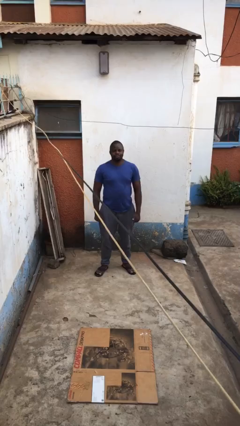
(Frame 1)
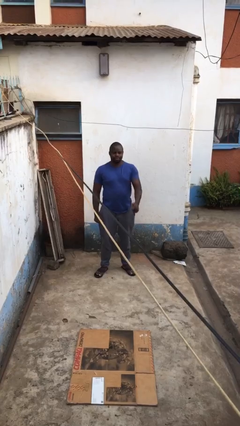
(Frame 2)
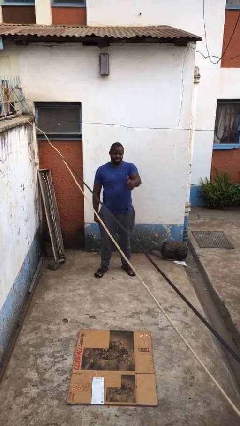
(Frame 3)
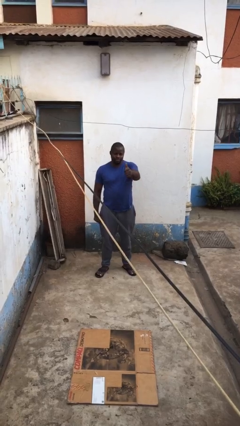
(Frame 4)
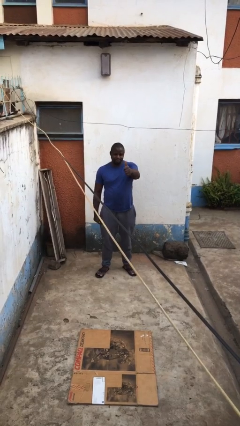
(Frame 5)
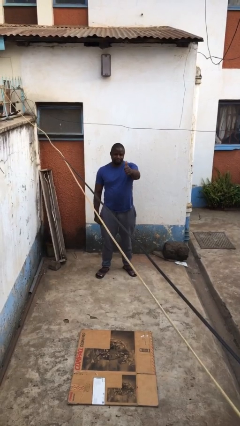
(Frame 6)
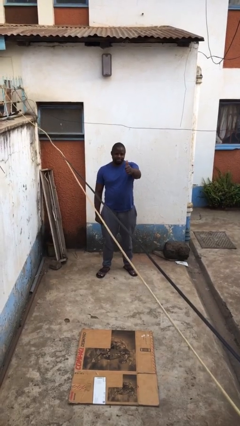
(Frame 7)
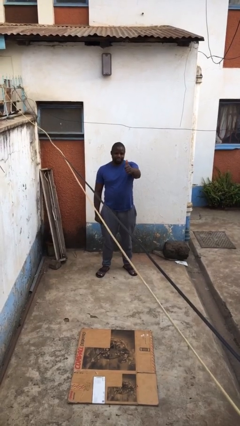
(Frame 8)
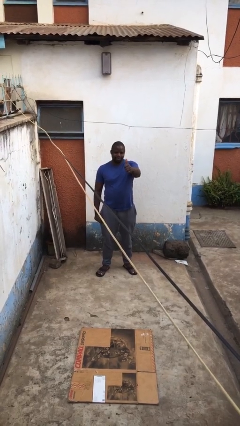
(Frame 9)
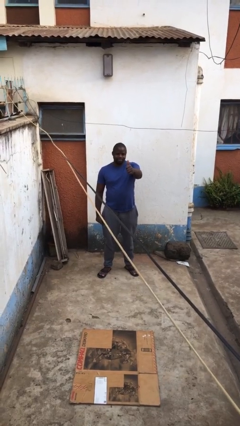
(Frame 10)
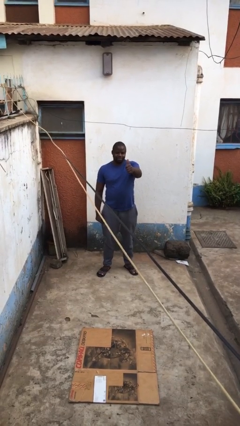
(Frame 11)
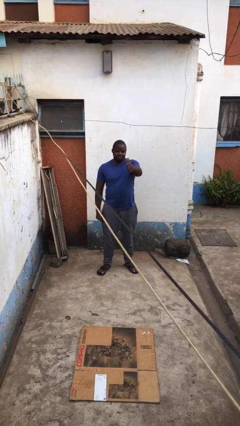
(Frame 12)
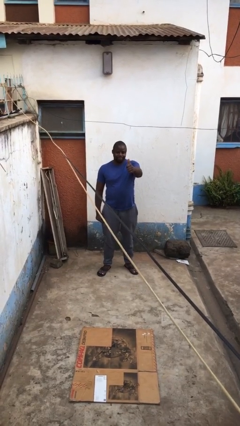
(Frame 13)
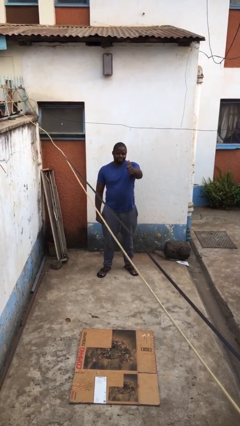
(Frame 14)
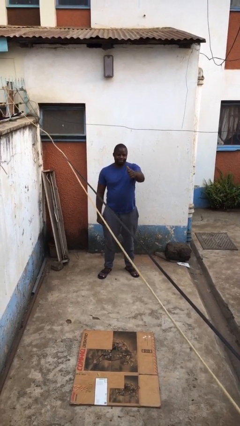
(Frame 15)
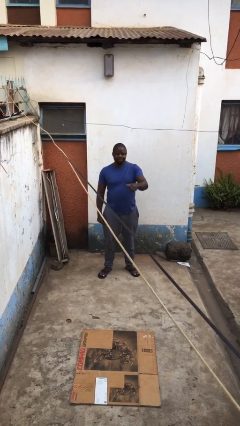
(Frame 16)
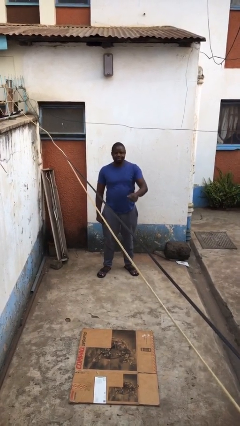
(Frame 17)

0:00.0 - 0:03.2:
person gestures thumbs up

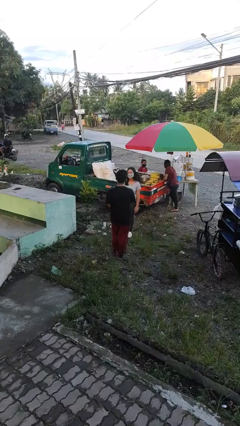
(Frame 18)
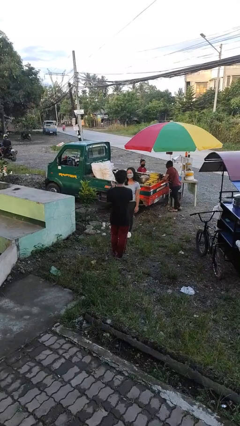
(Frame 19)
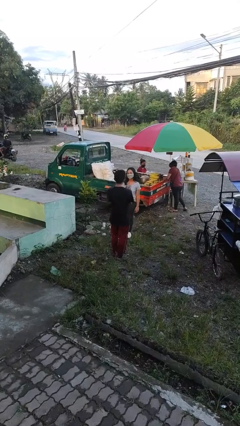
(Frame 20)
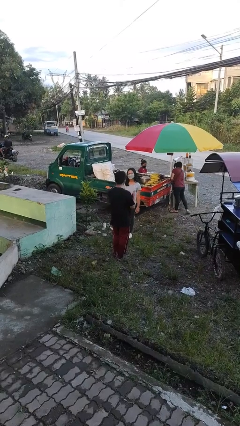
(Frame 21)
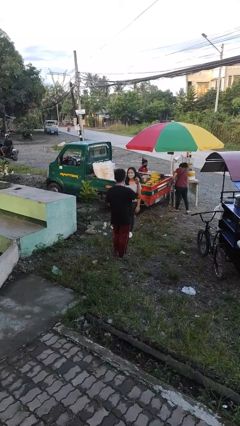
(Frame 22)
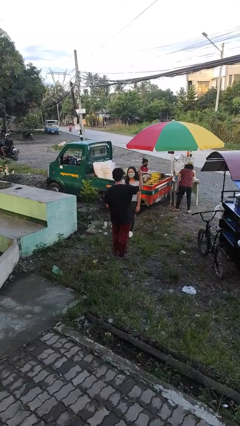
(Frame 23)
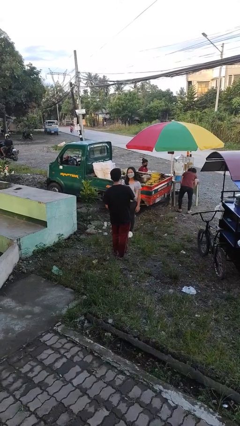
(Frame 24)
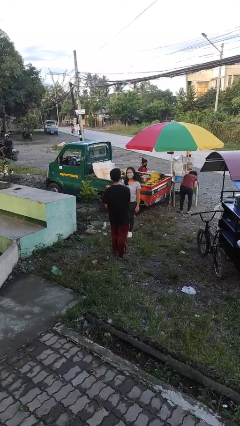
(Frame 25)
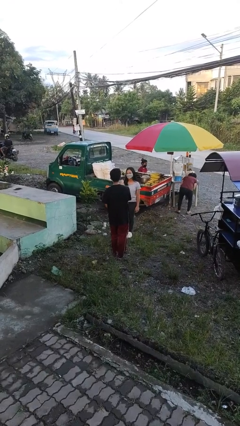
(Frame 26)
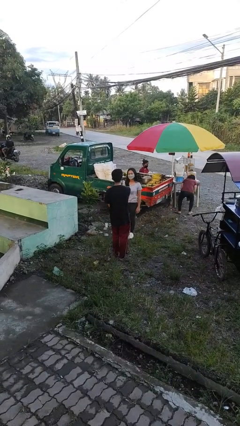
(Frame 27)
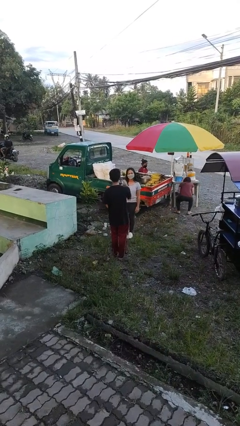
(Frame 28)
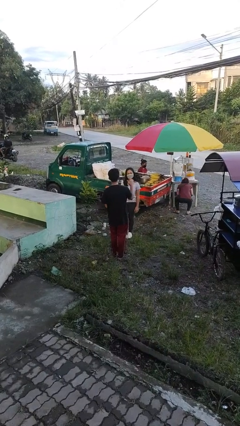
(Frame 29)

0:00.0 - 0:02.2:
person talks to person

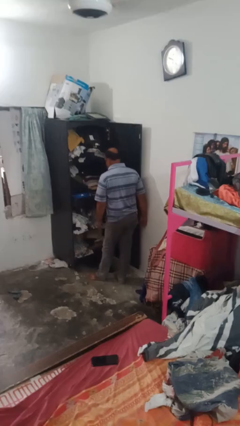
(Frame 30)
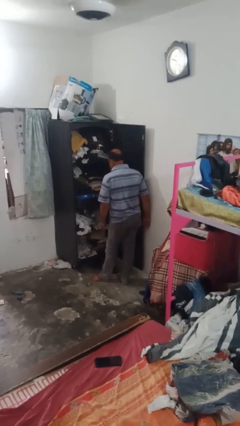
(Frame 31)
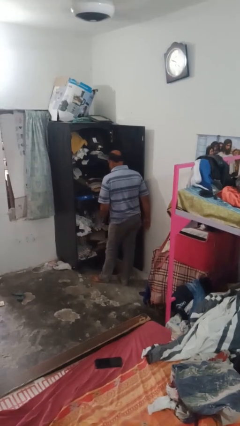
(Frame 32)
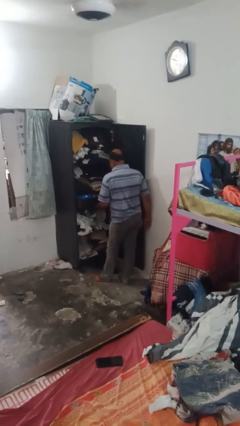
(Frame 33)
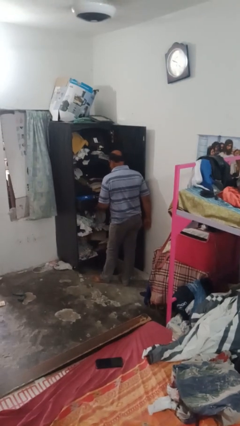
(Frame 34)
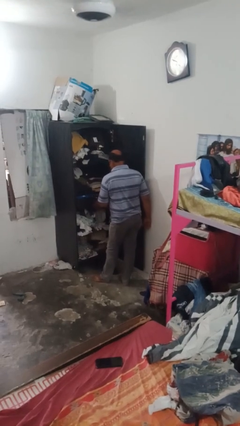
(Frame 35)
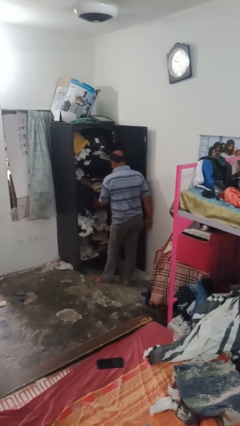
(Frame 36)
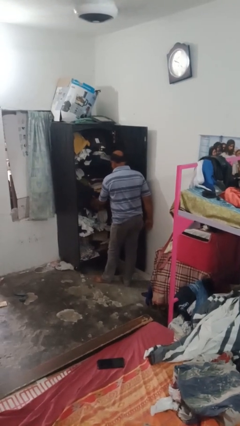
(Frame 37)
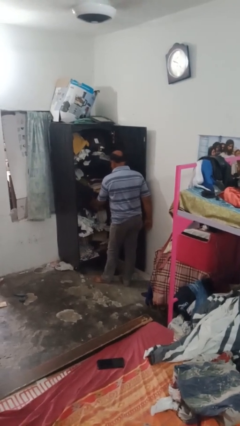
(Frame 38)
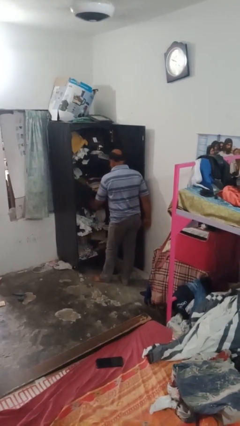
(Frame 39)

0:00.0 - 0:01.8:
person closes dresser drawer

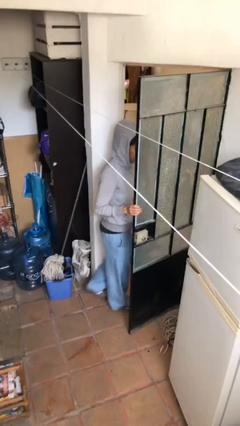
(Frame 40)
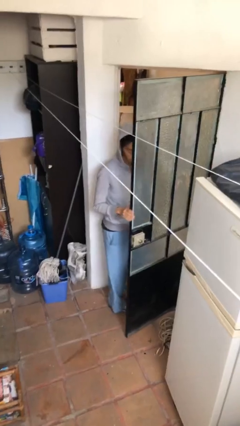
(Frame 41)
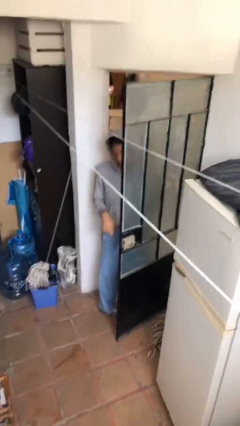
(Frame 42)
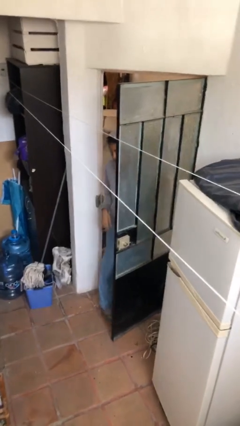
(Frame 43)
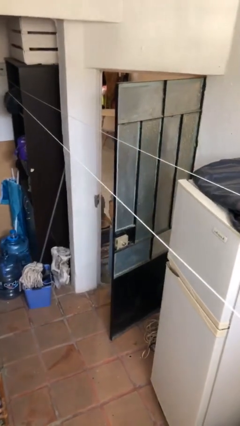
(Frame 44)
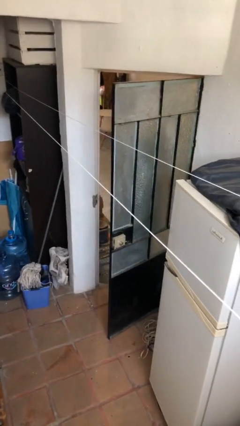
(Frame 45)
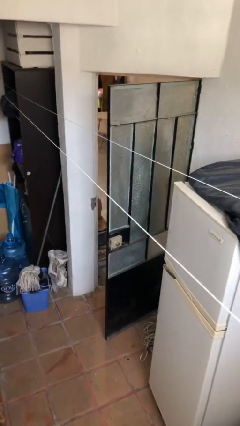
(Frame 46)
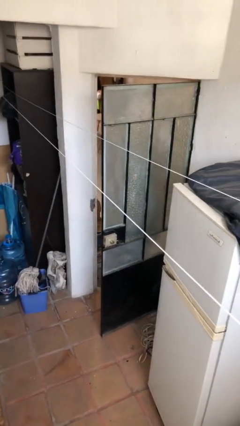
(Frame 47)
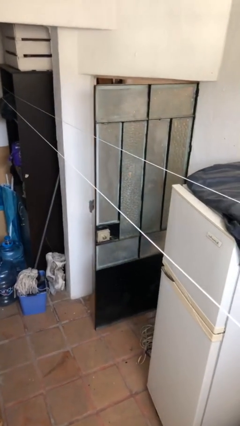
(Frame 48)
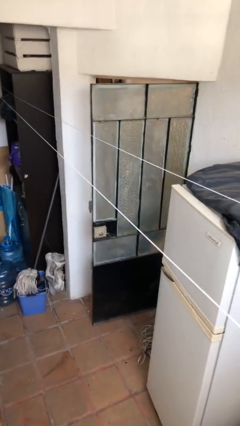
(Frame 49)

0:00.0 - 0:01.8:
person exits scene through structure

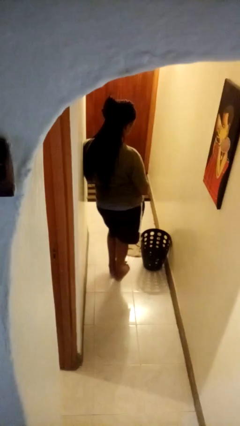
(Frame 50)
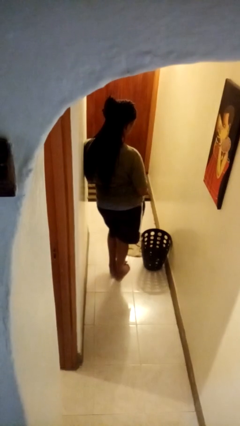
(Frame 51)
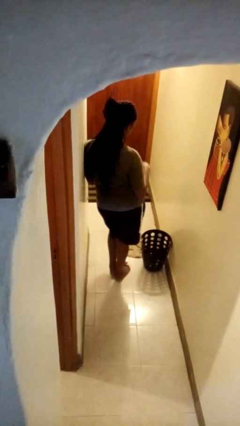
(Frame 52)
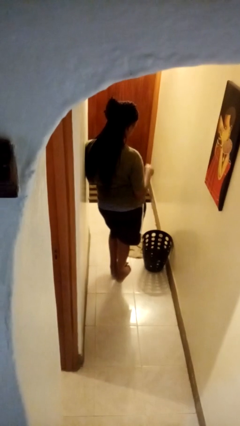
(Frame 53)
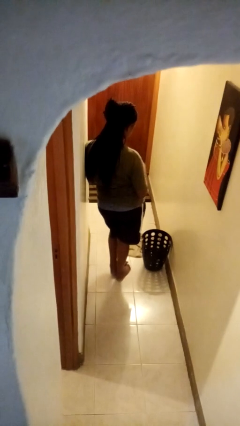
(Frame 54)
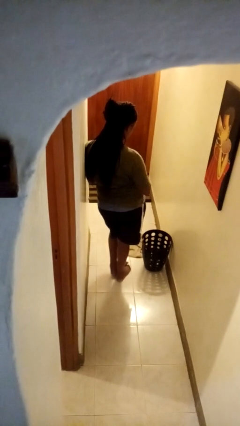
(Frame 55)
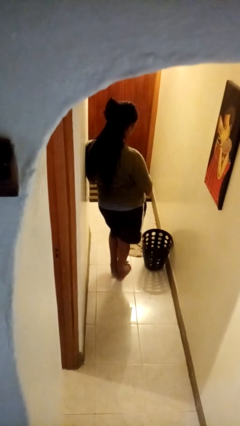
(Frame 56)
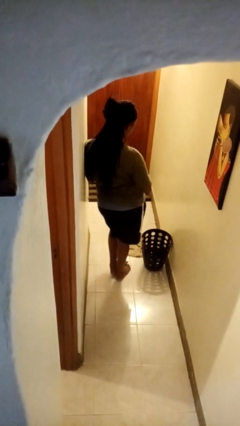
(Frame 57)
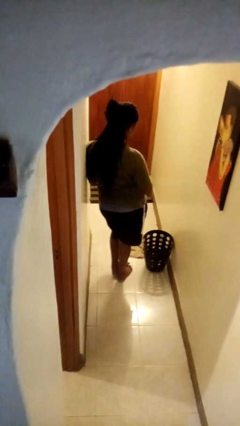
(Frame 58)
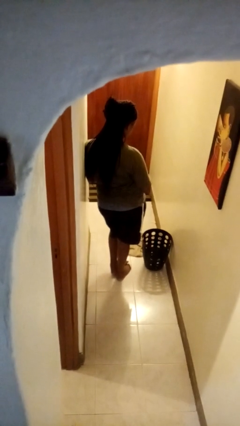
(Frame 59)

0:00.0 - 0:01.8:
person discards trash

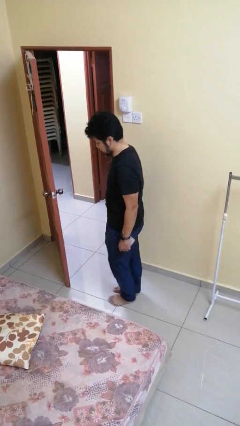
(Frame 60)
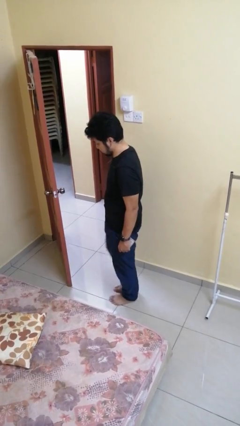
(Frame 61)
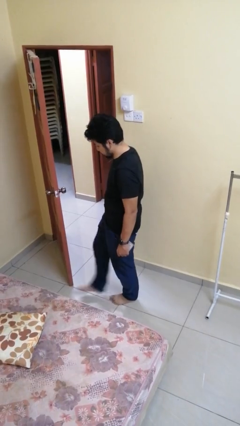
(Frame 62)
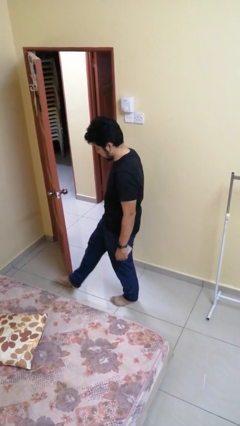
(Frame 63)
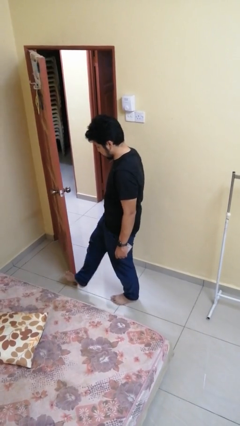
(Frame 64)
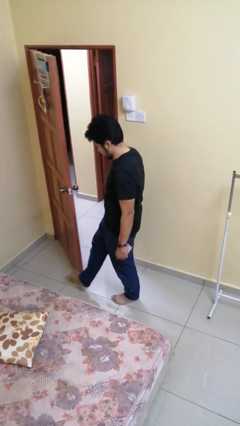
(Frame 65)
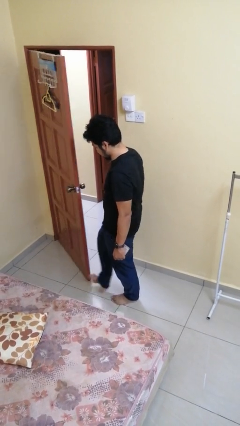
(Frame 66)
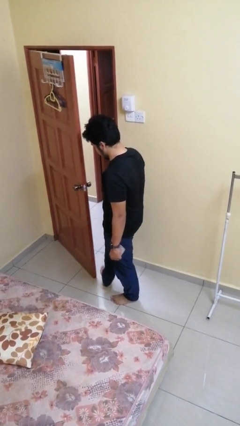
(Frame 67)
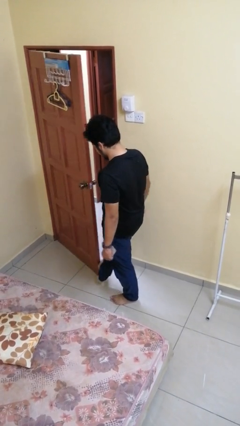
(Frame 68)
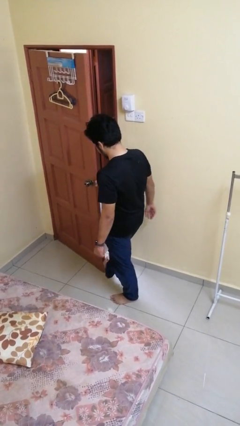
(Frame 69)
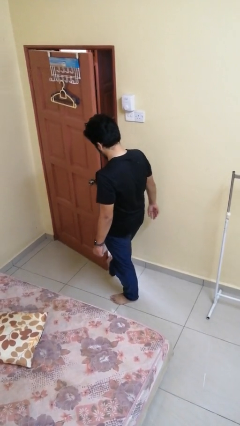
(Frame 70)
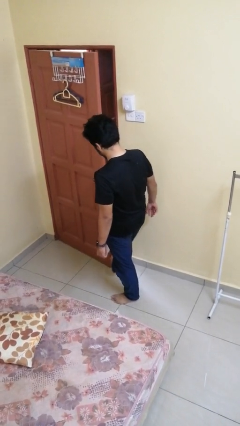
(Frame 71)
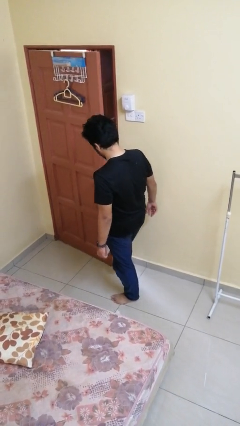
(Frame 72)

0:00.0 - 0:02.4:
person closes door with foot

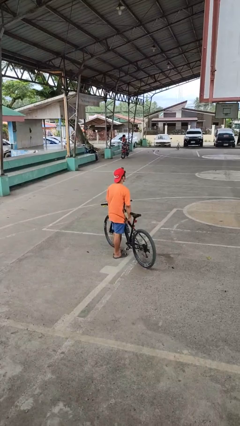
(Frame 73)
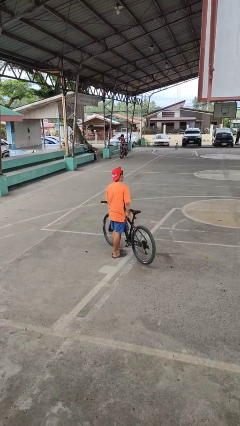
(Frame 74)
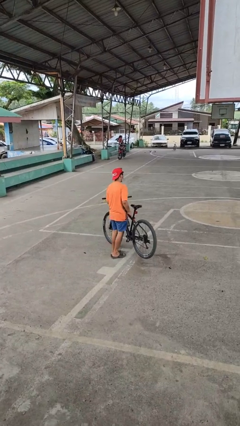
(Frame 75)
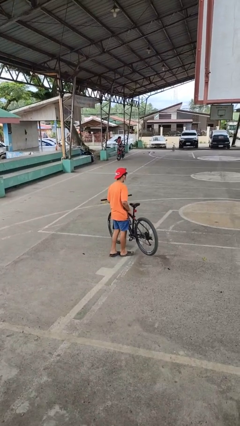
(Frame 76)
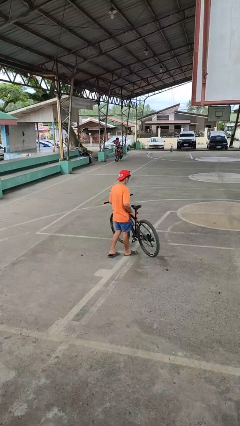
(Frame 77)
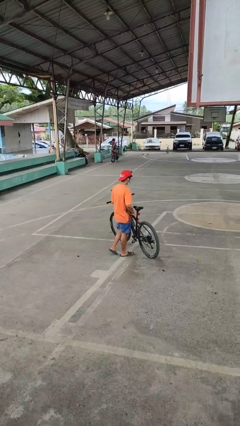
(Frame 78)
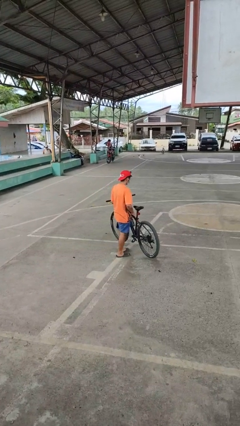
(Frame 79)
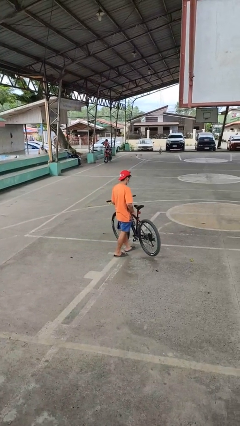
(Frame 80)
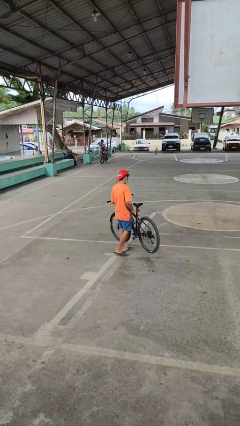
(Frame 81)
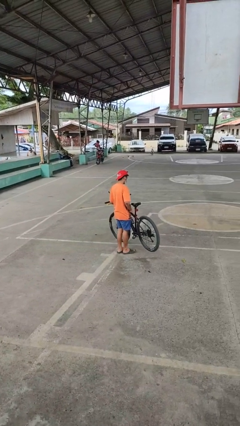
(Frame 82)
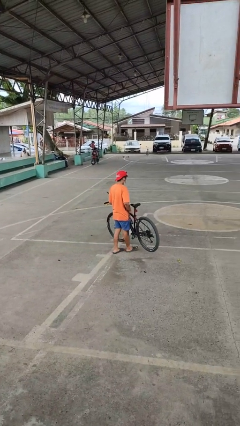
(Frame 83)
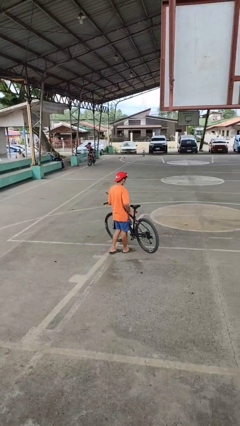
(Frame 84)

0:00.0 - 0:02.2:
person carries bicycle

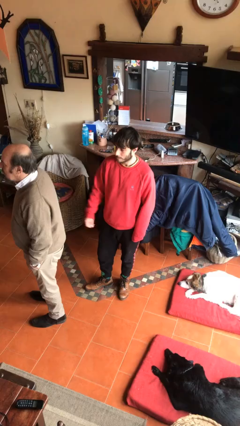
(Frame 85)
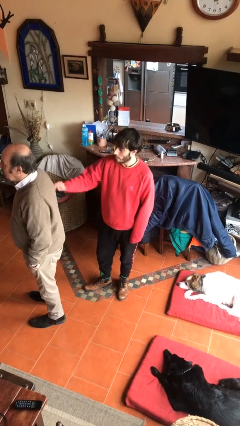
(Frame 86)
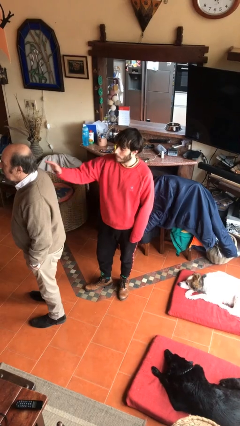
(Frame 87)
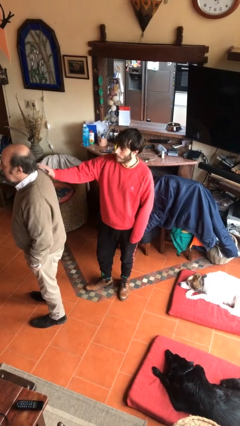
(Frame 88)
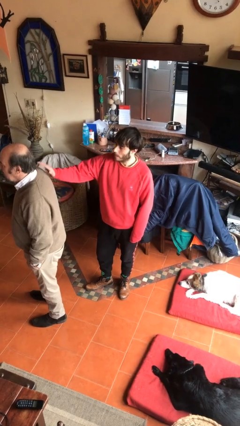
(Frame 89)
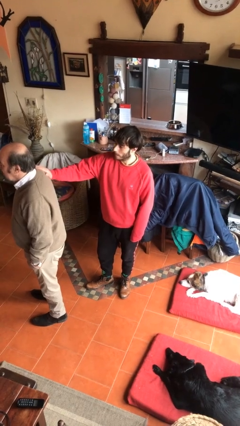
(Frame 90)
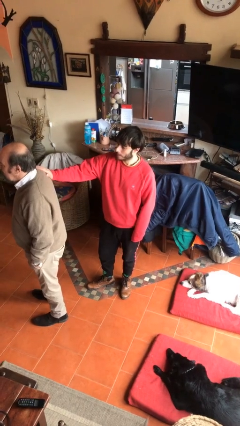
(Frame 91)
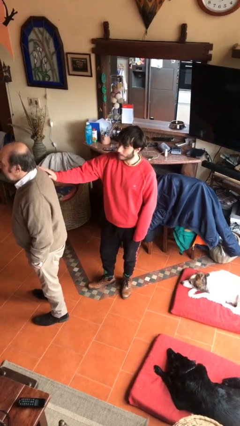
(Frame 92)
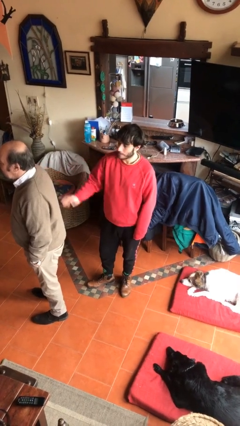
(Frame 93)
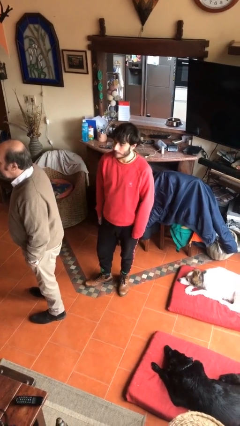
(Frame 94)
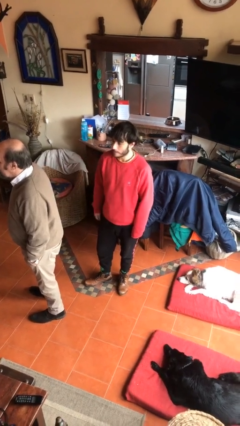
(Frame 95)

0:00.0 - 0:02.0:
person touches back of person
